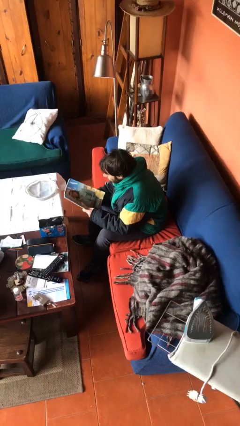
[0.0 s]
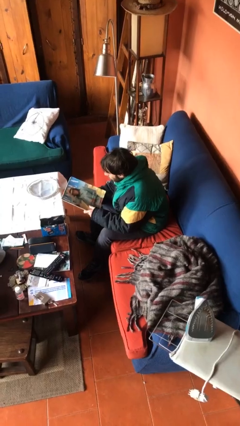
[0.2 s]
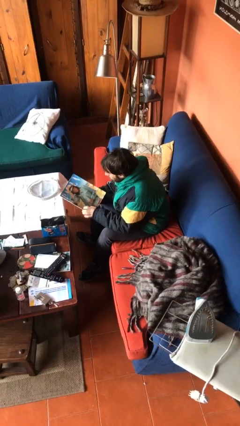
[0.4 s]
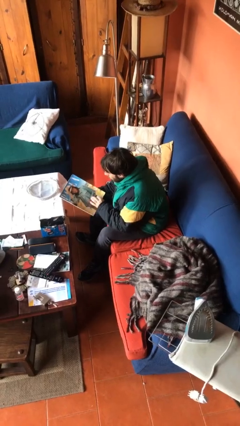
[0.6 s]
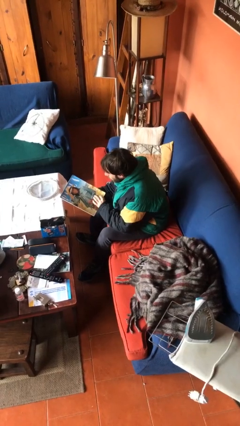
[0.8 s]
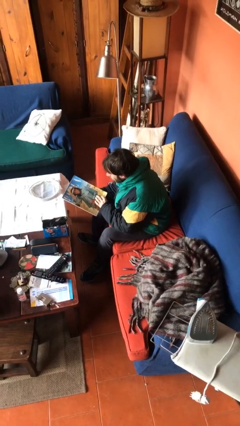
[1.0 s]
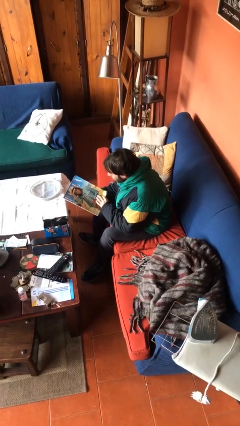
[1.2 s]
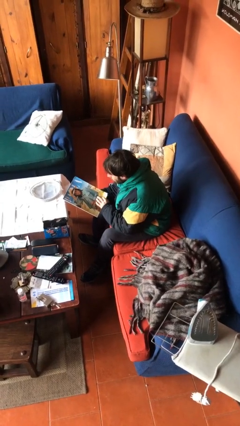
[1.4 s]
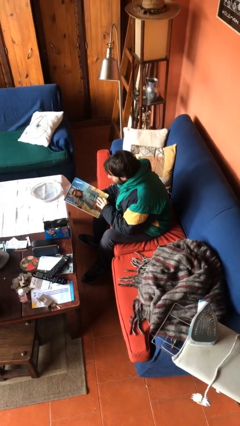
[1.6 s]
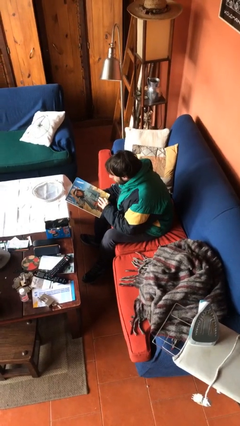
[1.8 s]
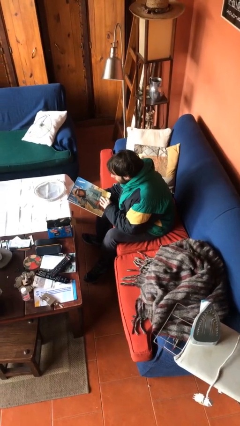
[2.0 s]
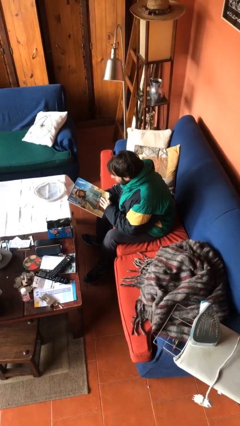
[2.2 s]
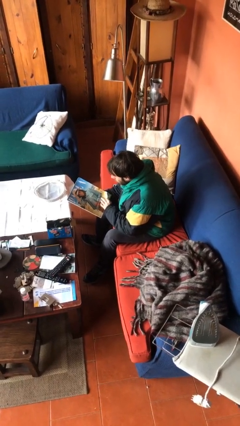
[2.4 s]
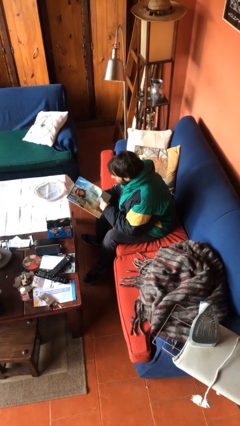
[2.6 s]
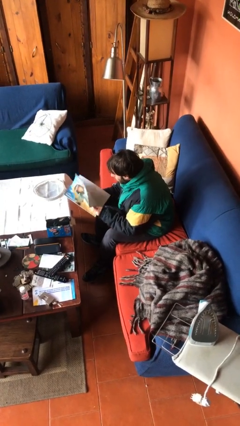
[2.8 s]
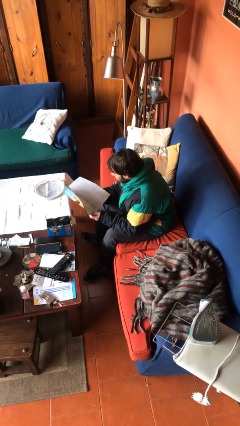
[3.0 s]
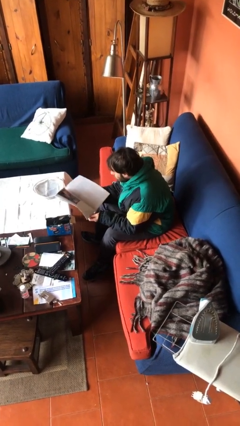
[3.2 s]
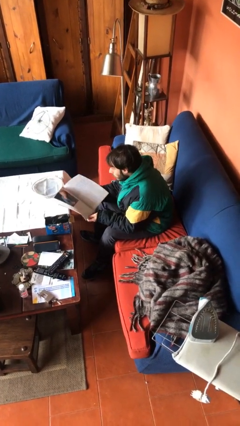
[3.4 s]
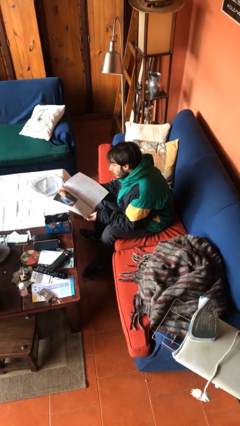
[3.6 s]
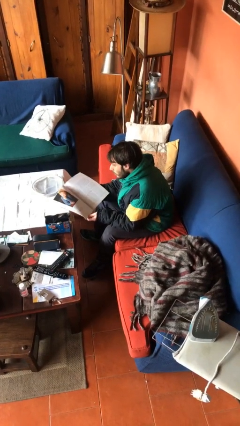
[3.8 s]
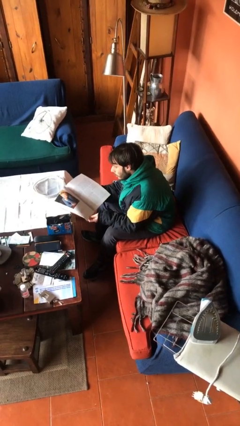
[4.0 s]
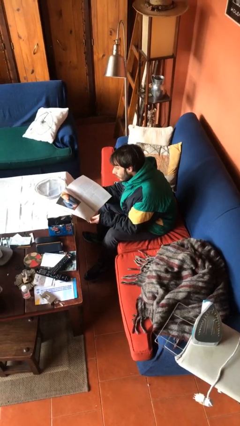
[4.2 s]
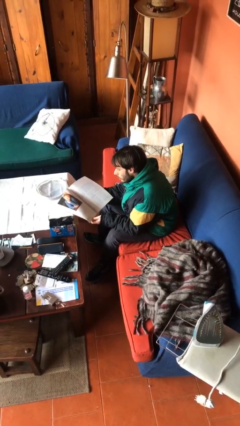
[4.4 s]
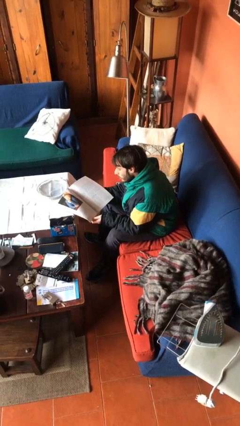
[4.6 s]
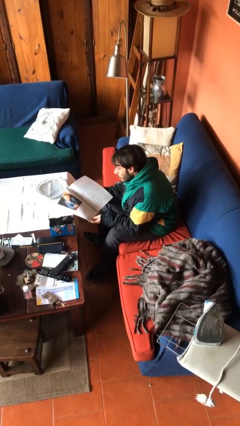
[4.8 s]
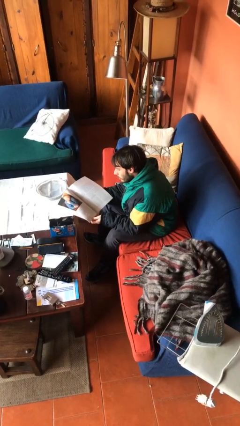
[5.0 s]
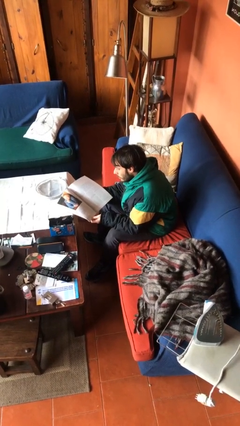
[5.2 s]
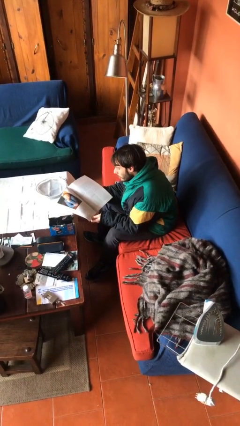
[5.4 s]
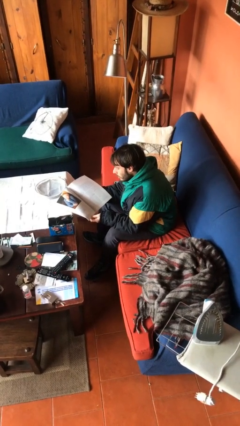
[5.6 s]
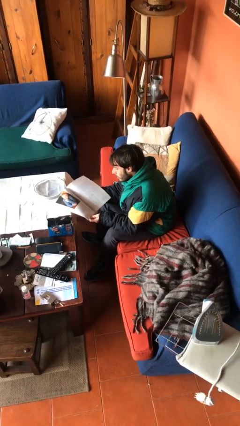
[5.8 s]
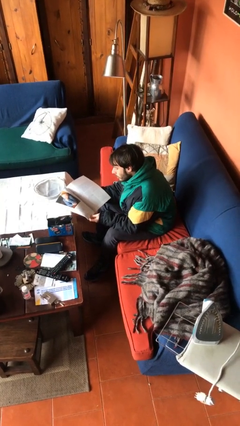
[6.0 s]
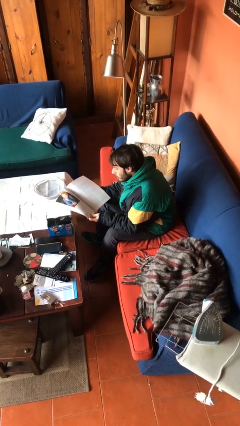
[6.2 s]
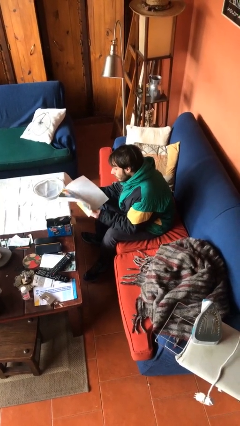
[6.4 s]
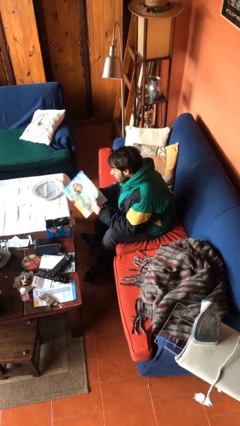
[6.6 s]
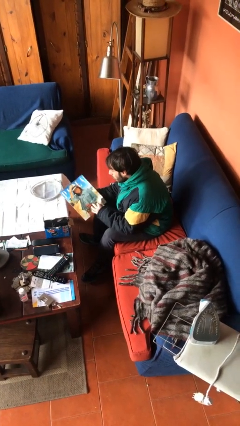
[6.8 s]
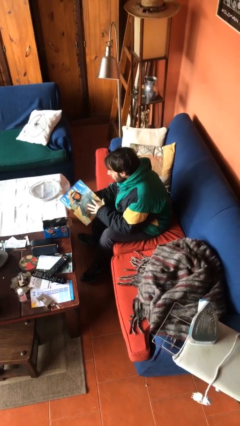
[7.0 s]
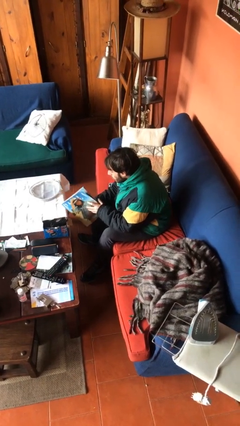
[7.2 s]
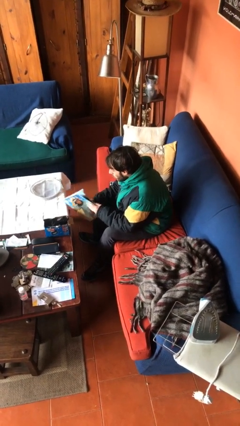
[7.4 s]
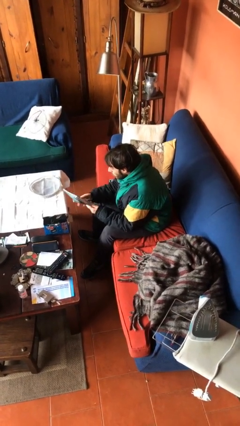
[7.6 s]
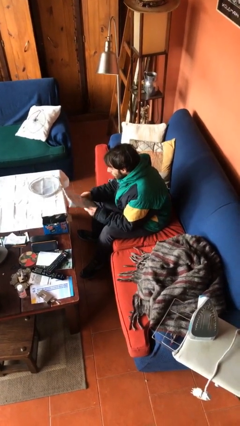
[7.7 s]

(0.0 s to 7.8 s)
person reads magazine

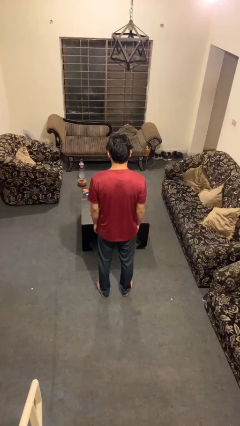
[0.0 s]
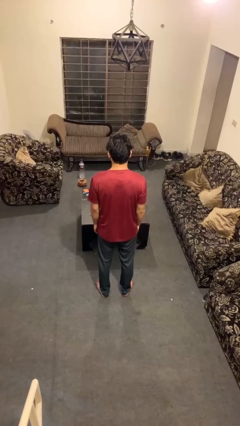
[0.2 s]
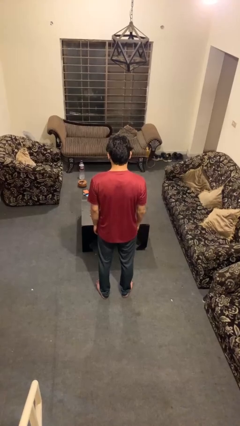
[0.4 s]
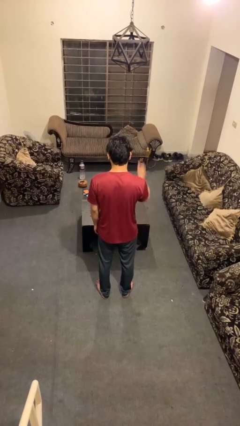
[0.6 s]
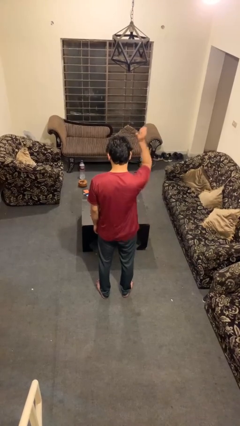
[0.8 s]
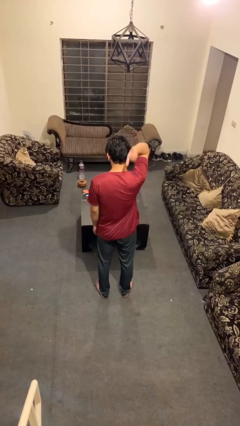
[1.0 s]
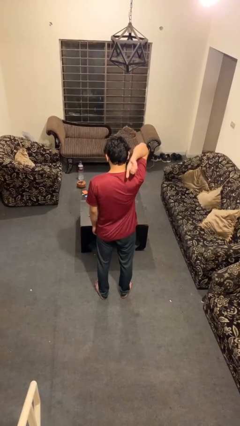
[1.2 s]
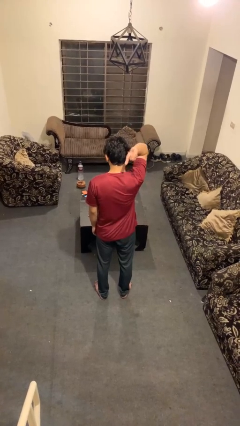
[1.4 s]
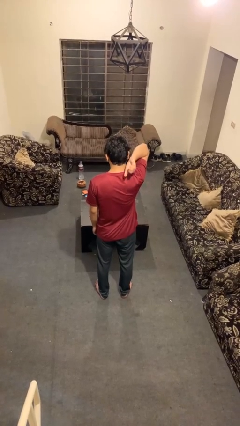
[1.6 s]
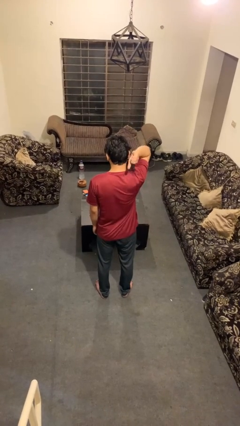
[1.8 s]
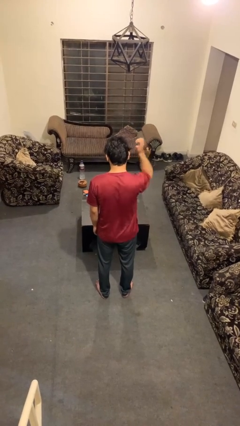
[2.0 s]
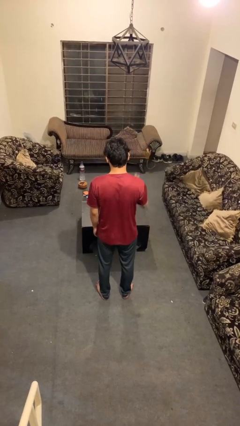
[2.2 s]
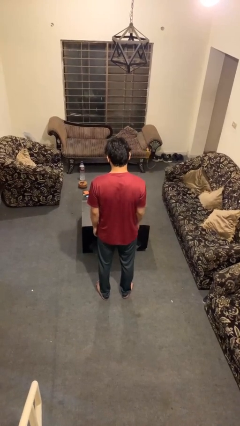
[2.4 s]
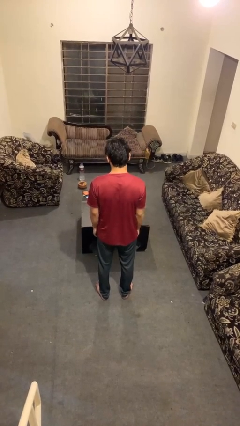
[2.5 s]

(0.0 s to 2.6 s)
person gestures behind me

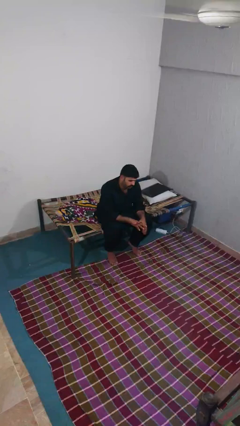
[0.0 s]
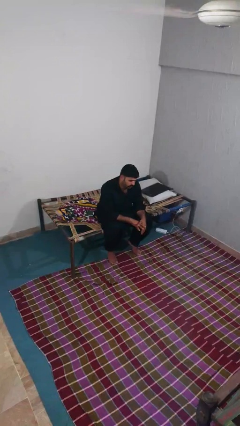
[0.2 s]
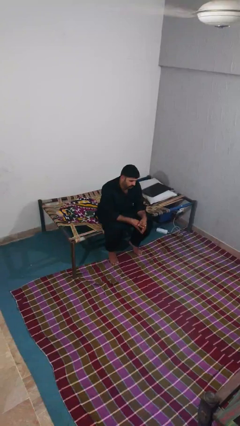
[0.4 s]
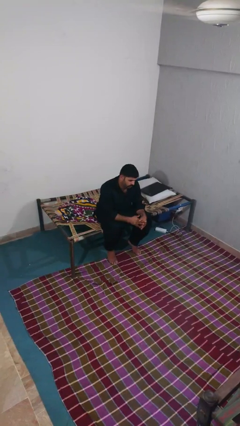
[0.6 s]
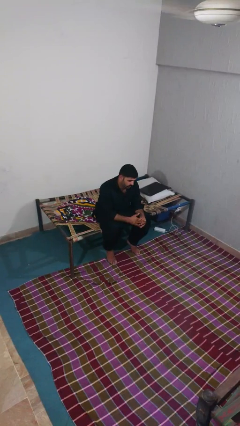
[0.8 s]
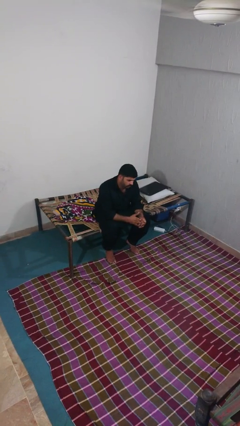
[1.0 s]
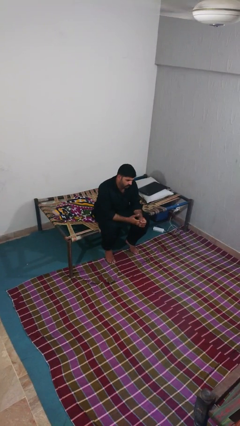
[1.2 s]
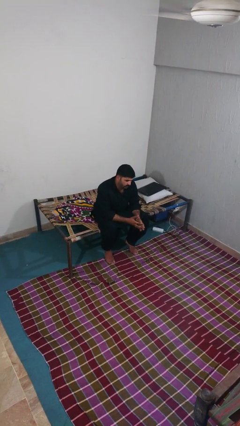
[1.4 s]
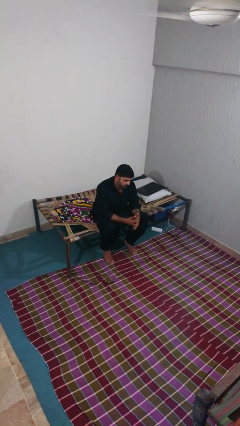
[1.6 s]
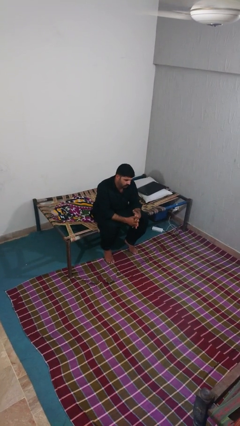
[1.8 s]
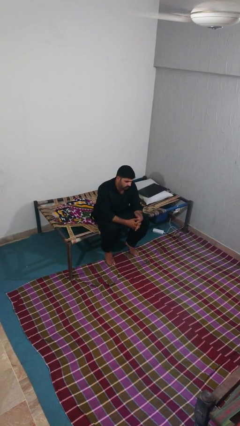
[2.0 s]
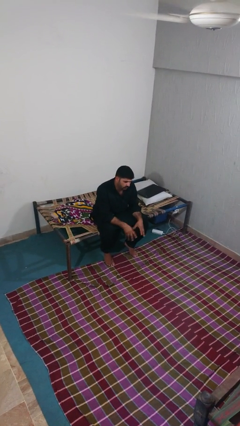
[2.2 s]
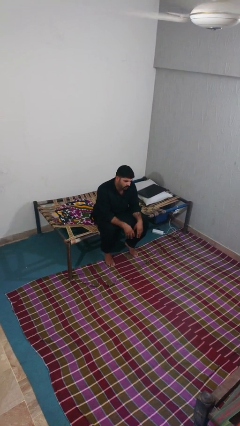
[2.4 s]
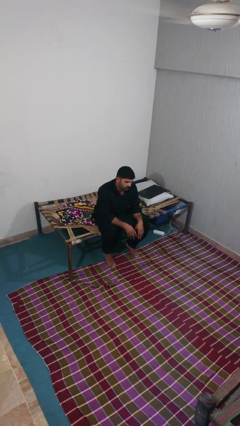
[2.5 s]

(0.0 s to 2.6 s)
person cracks knuckles

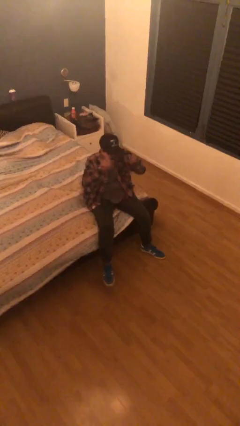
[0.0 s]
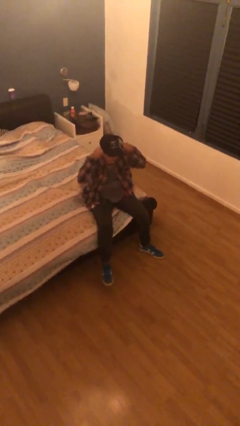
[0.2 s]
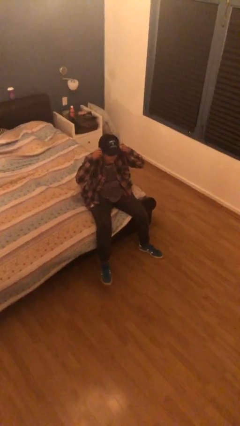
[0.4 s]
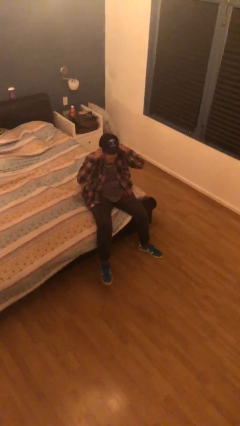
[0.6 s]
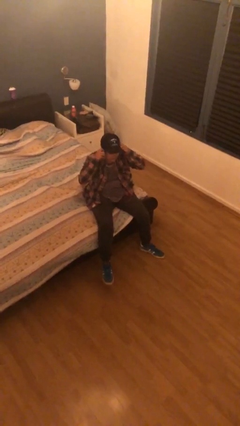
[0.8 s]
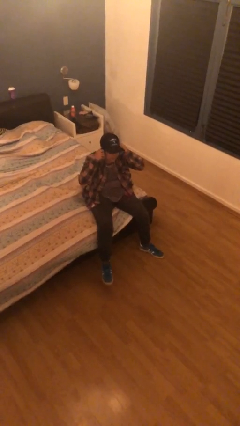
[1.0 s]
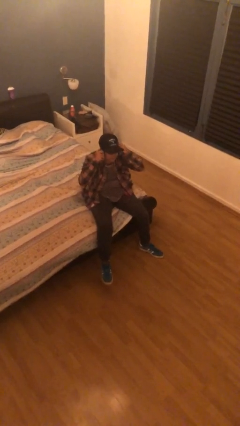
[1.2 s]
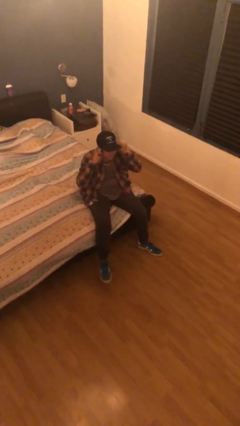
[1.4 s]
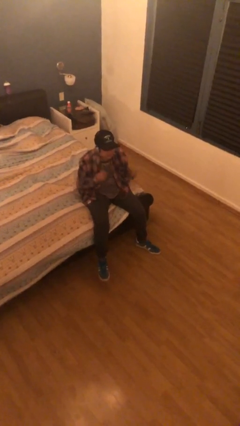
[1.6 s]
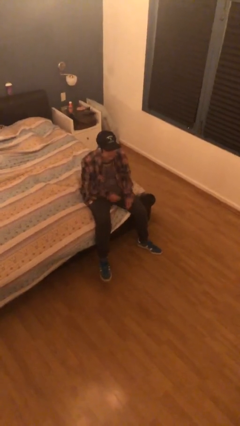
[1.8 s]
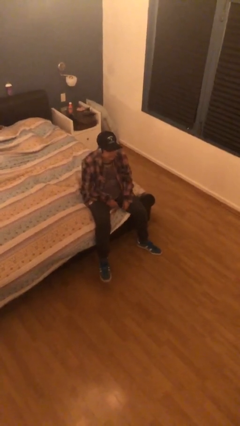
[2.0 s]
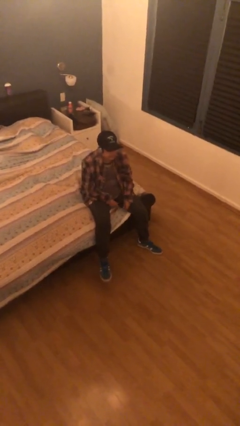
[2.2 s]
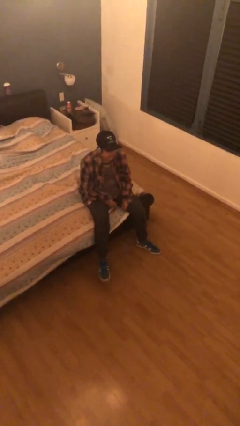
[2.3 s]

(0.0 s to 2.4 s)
person puts on headphones

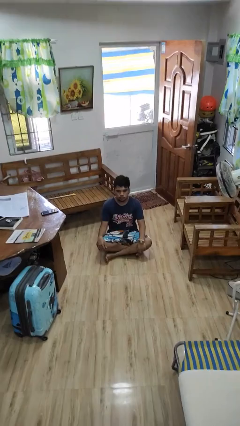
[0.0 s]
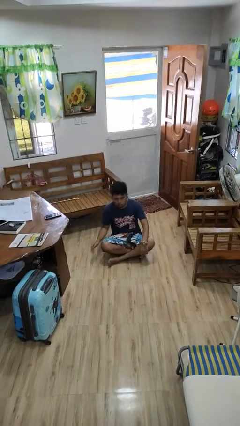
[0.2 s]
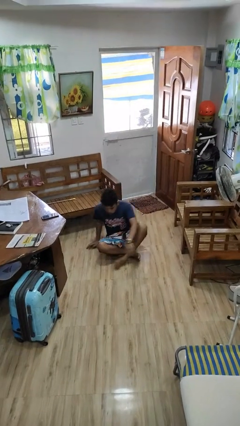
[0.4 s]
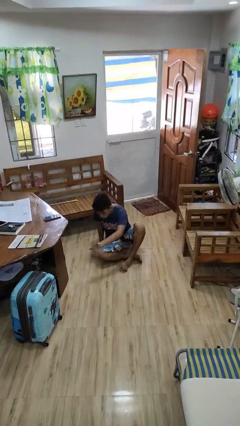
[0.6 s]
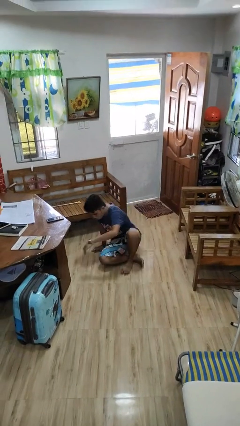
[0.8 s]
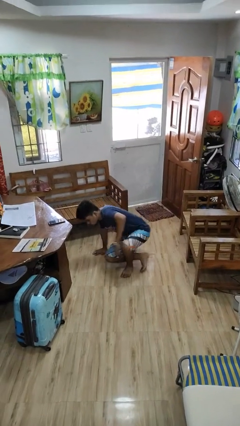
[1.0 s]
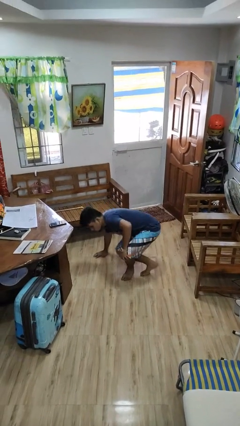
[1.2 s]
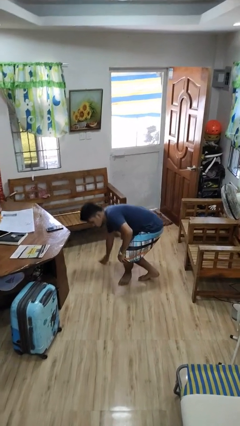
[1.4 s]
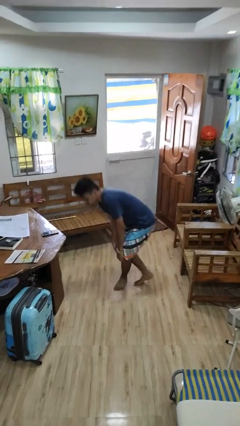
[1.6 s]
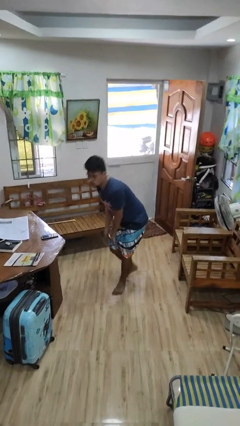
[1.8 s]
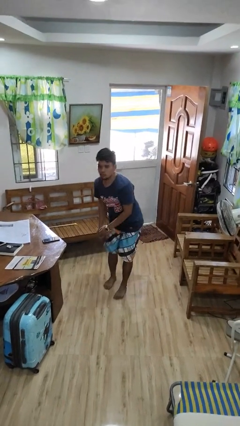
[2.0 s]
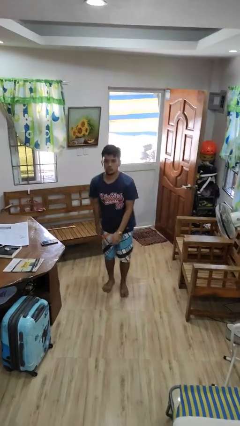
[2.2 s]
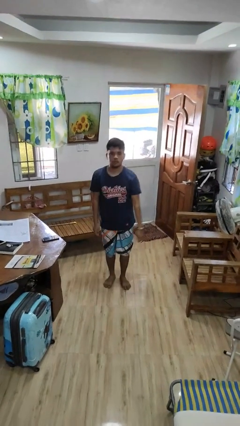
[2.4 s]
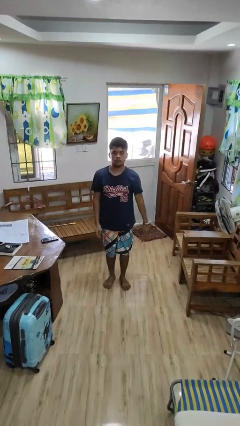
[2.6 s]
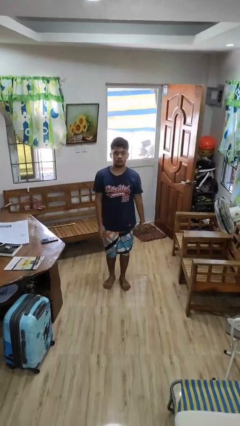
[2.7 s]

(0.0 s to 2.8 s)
person stands up from floor
